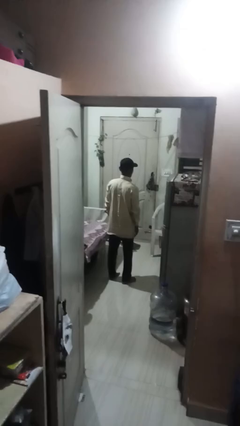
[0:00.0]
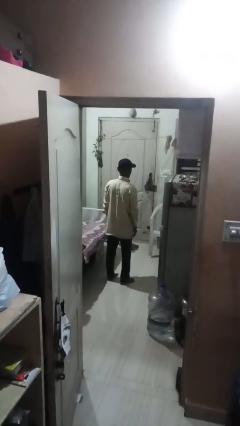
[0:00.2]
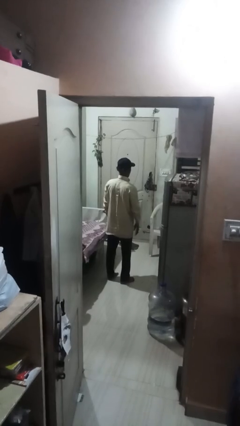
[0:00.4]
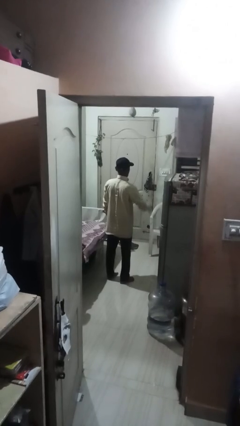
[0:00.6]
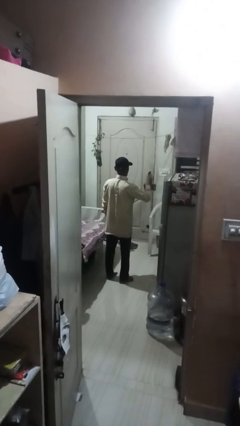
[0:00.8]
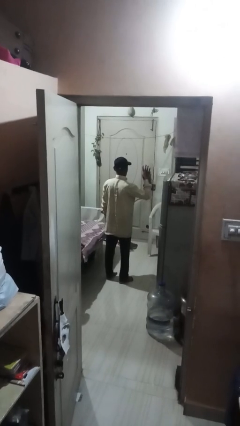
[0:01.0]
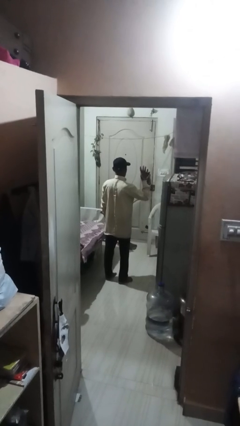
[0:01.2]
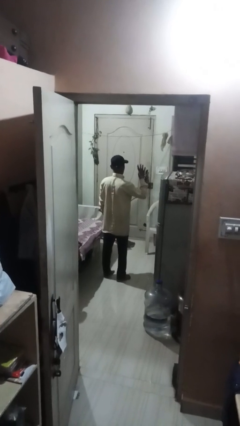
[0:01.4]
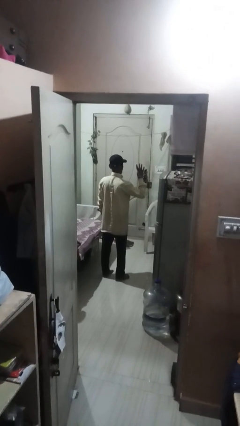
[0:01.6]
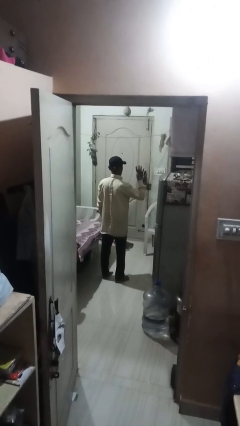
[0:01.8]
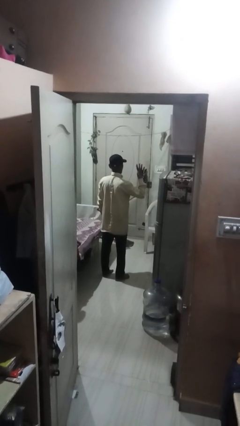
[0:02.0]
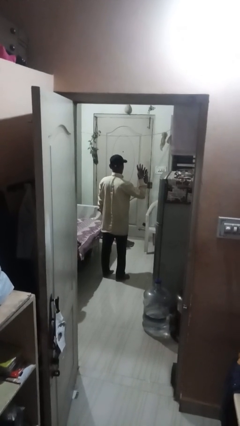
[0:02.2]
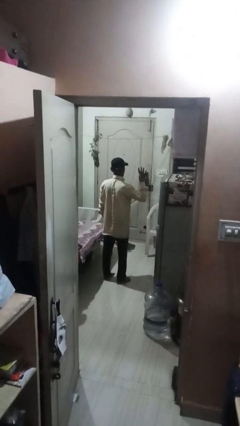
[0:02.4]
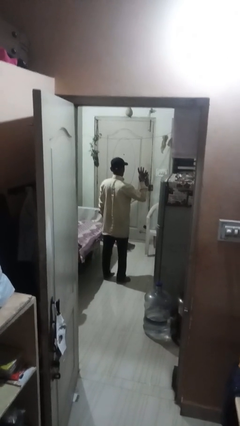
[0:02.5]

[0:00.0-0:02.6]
person gestures number four

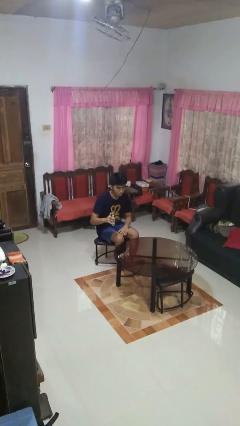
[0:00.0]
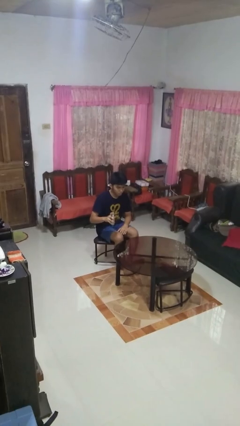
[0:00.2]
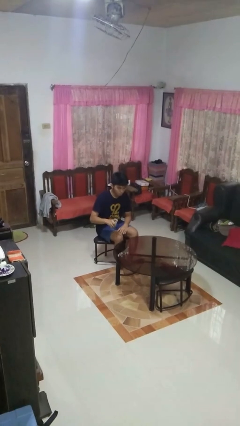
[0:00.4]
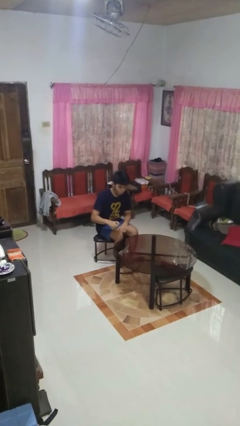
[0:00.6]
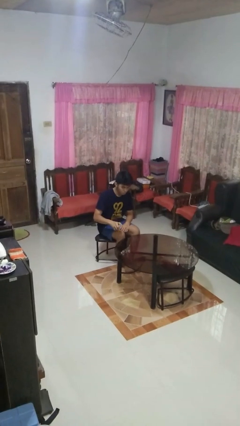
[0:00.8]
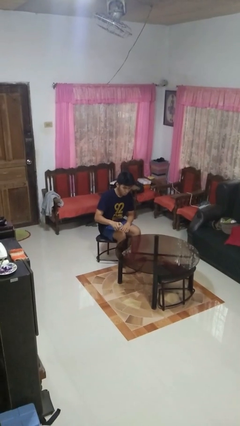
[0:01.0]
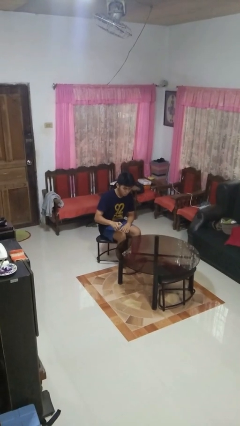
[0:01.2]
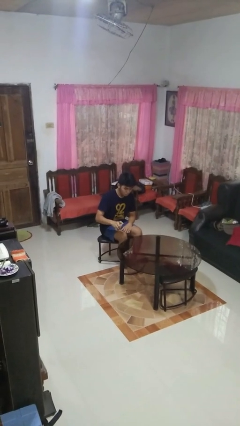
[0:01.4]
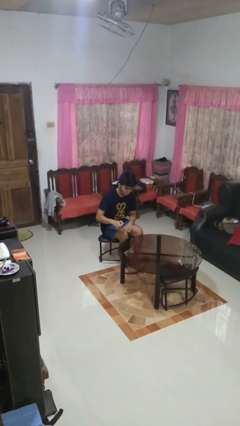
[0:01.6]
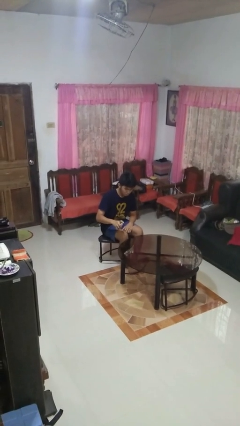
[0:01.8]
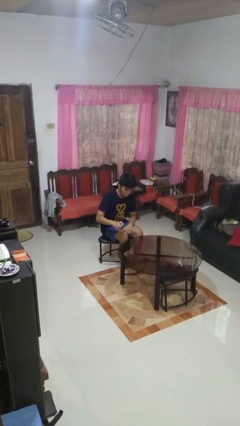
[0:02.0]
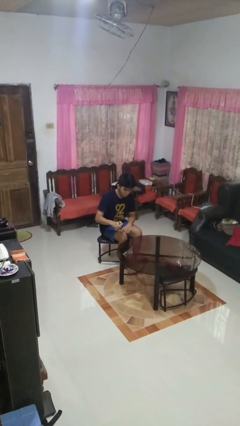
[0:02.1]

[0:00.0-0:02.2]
person sprays from bottle

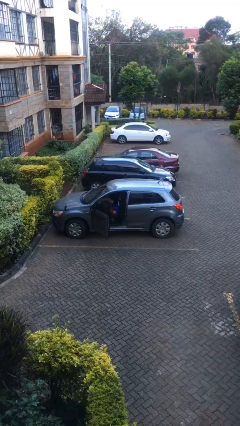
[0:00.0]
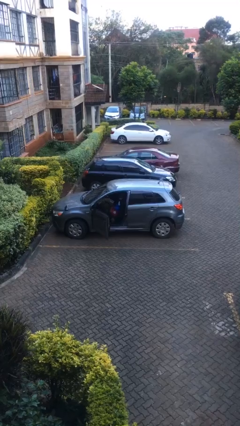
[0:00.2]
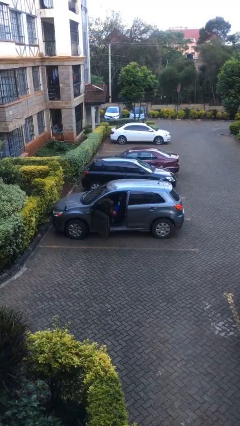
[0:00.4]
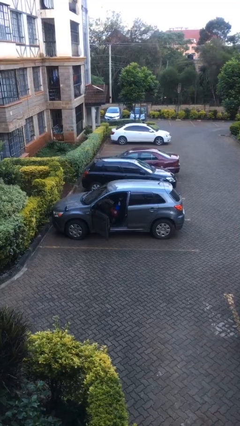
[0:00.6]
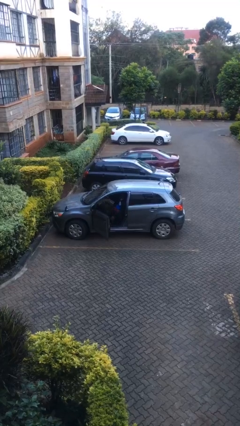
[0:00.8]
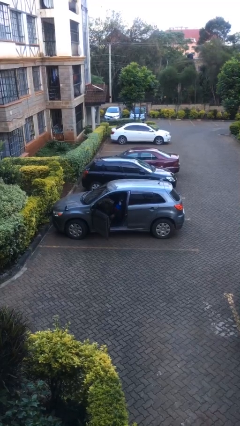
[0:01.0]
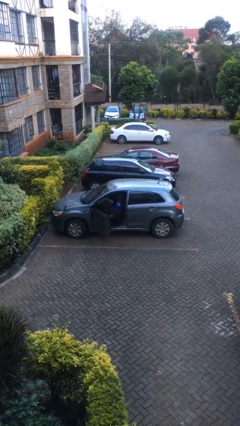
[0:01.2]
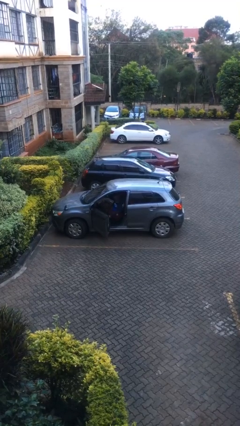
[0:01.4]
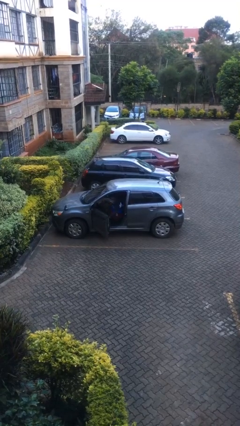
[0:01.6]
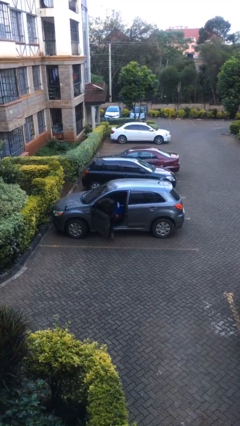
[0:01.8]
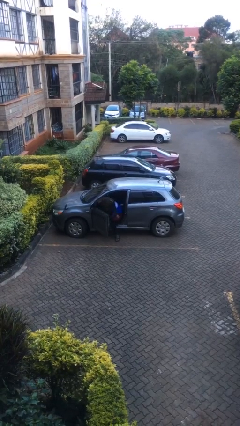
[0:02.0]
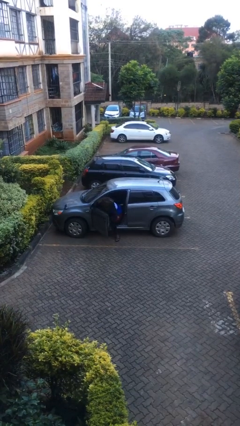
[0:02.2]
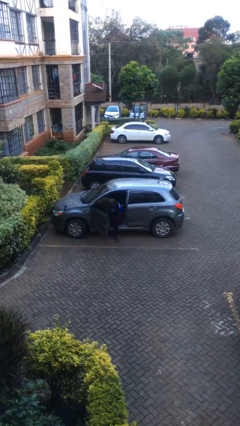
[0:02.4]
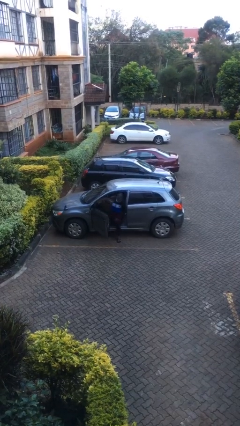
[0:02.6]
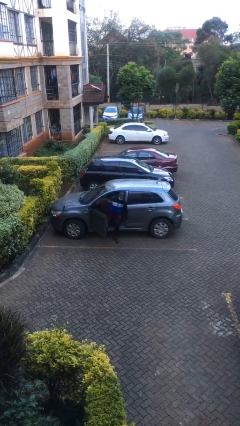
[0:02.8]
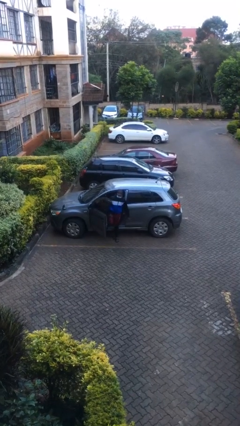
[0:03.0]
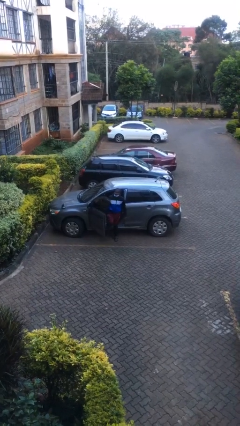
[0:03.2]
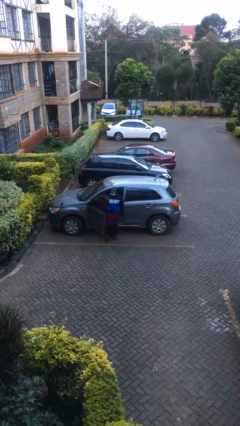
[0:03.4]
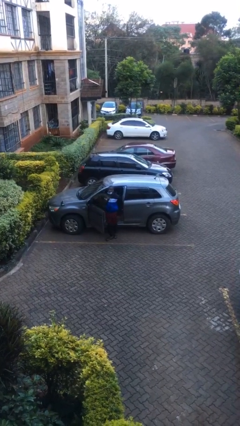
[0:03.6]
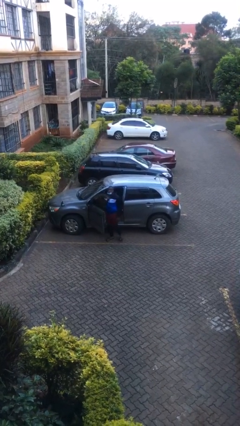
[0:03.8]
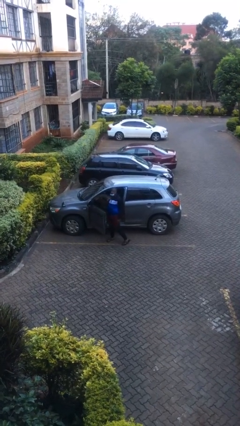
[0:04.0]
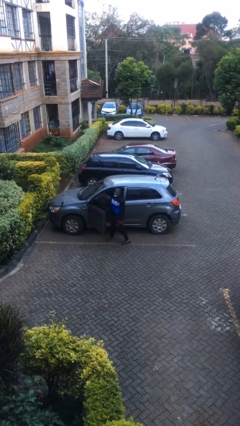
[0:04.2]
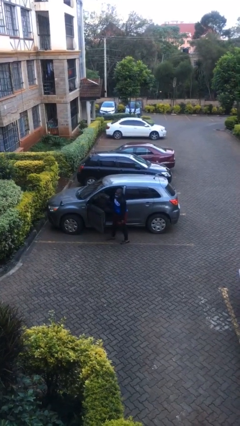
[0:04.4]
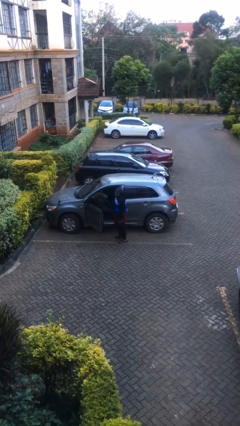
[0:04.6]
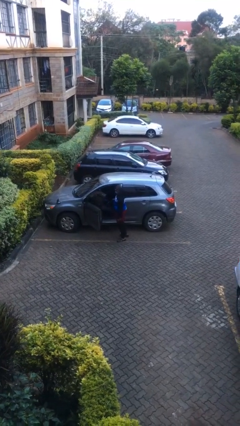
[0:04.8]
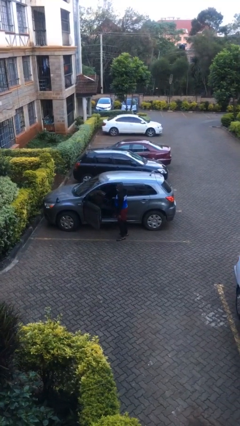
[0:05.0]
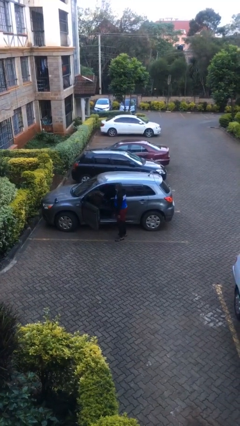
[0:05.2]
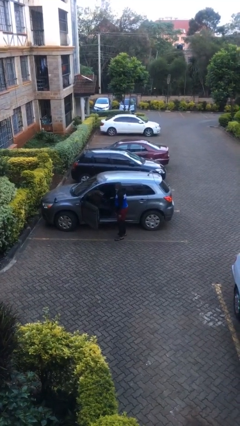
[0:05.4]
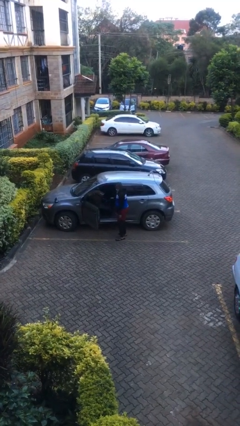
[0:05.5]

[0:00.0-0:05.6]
person exits car

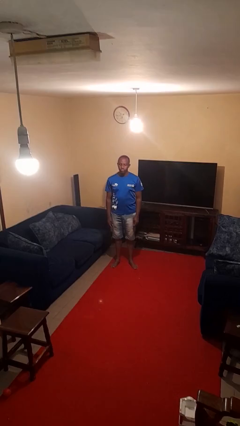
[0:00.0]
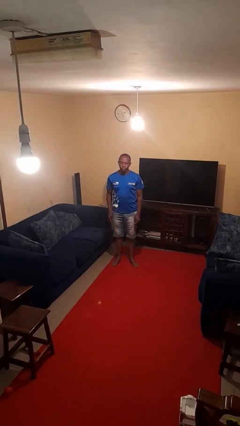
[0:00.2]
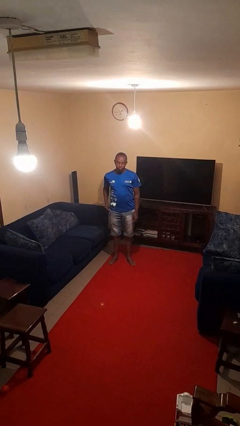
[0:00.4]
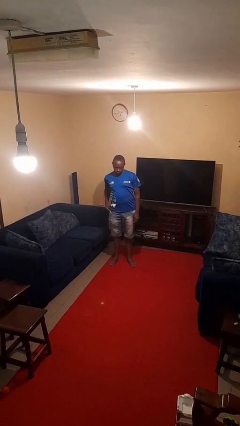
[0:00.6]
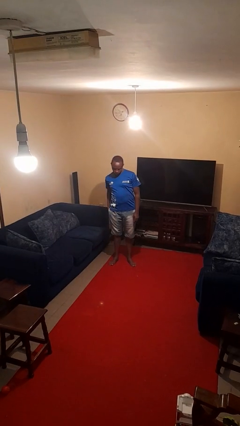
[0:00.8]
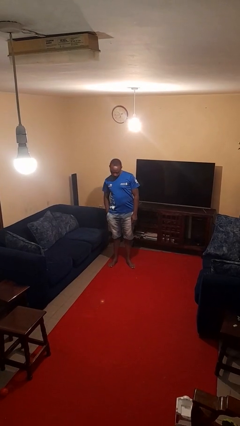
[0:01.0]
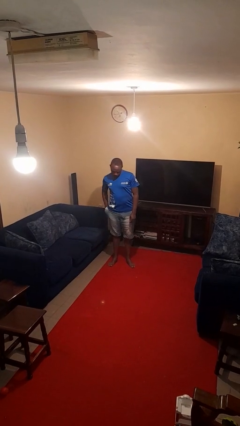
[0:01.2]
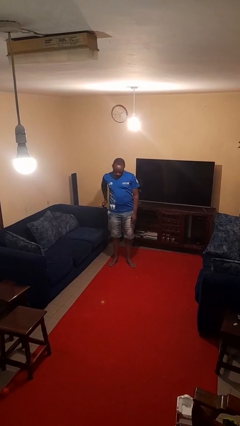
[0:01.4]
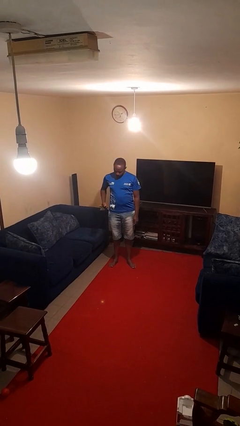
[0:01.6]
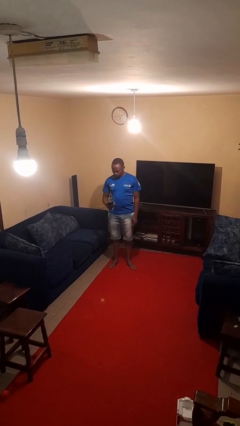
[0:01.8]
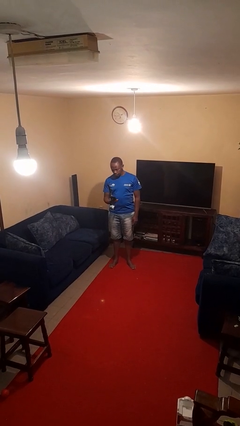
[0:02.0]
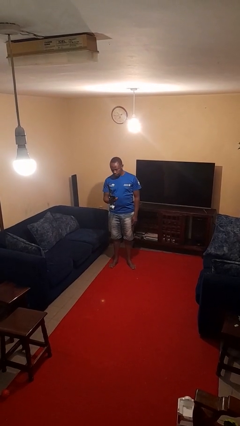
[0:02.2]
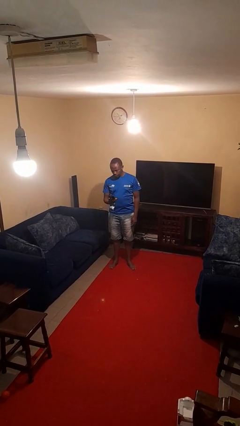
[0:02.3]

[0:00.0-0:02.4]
person takes phone from pocket

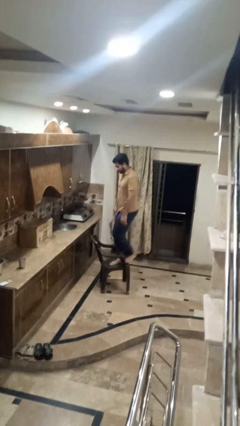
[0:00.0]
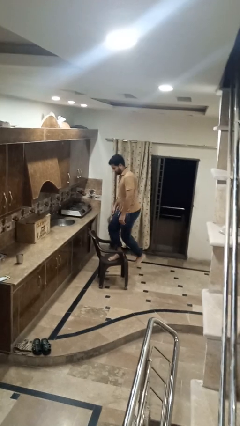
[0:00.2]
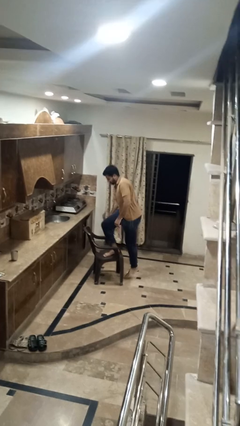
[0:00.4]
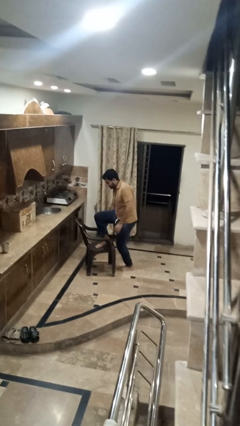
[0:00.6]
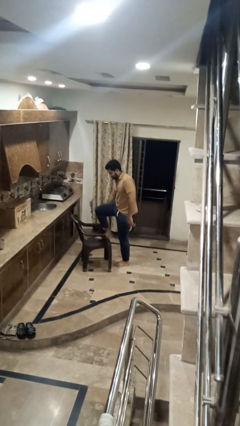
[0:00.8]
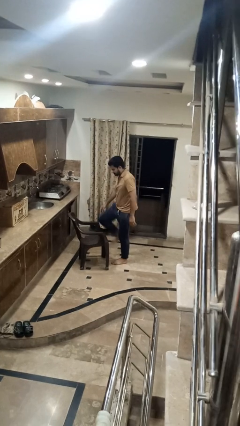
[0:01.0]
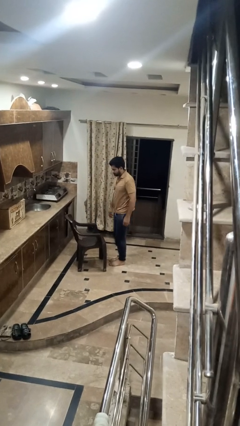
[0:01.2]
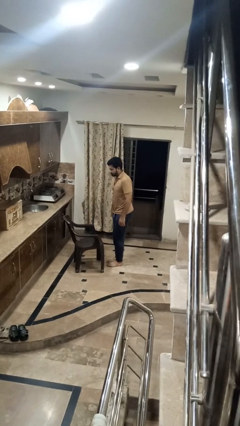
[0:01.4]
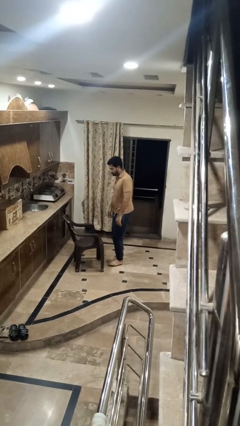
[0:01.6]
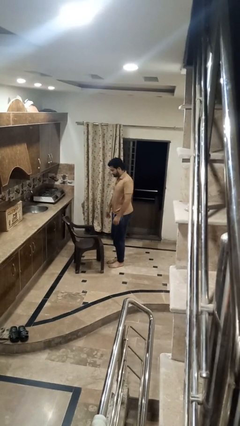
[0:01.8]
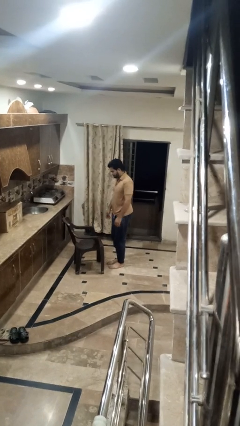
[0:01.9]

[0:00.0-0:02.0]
person climbs off chair

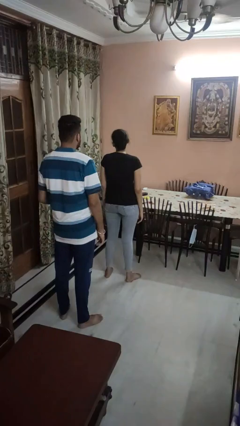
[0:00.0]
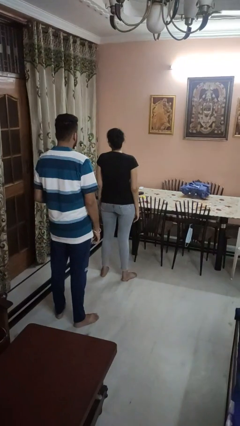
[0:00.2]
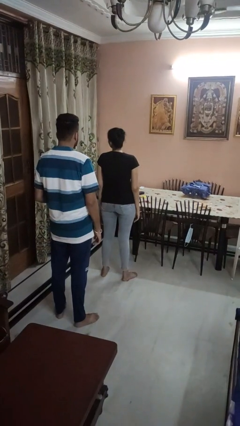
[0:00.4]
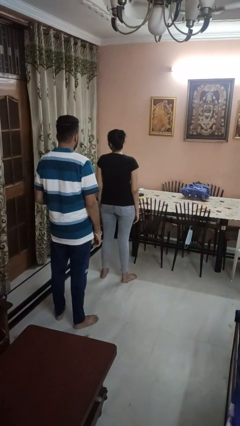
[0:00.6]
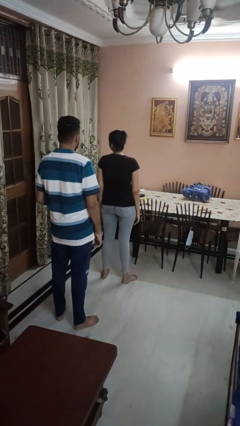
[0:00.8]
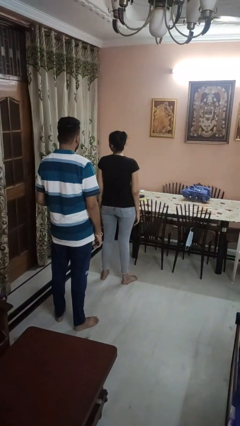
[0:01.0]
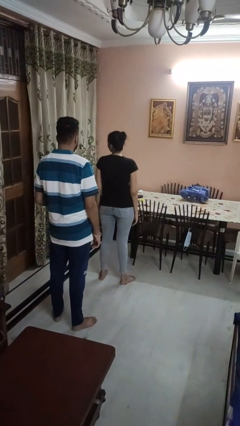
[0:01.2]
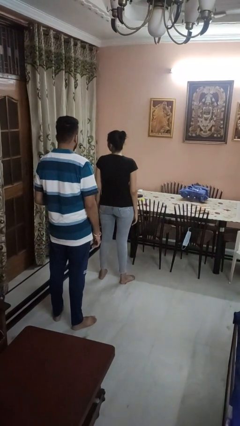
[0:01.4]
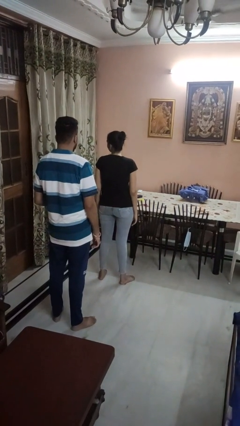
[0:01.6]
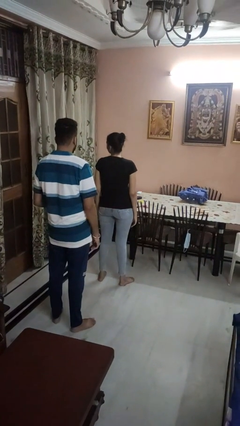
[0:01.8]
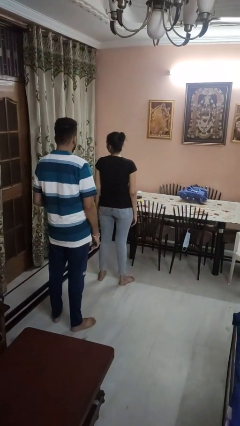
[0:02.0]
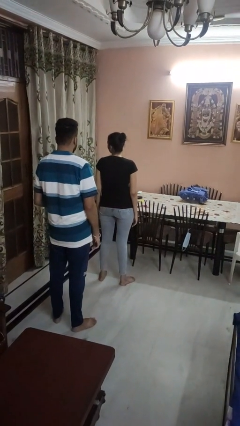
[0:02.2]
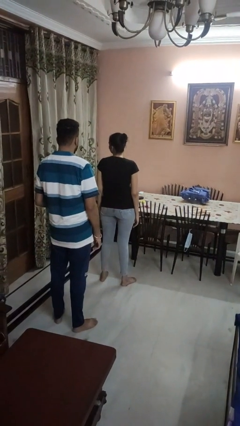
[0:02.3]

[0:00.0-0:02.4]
person looks over shoulder

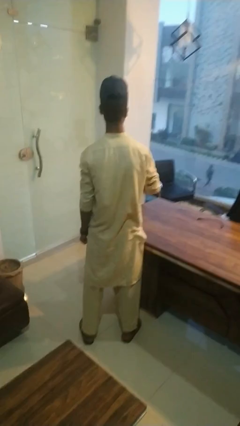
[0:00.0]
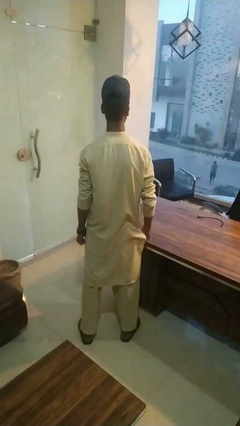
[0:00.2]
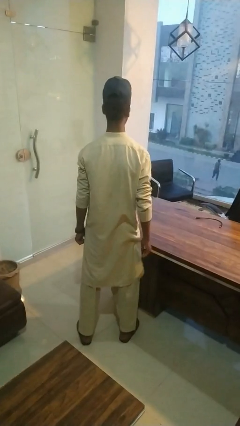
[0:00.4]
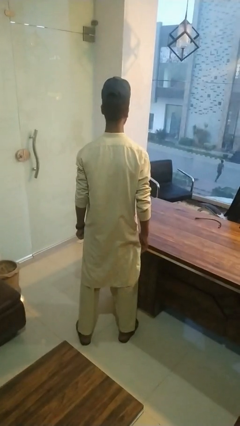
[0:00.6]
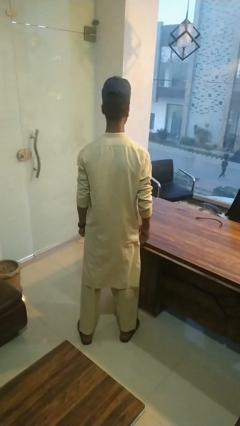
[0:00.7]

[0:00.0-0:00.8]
person gestures blow kiss
